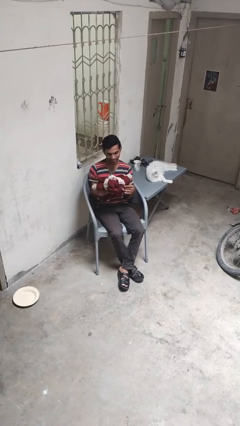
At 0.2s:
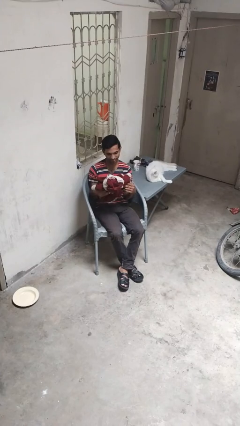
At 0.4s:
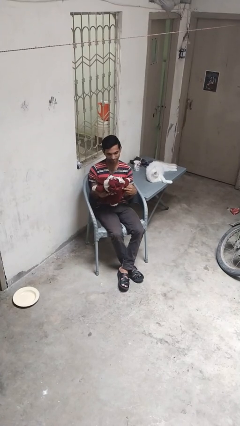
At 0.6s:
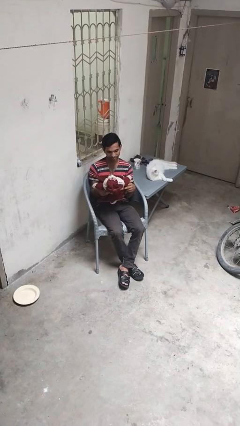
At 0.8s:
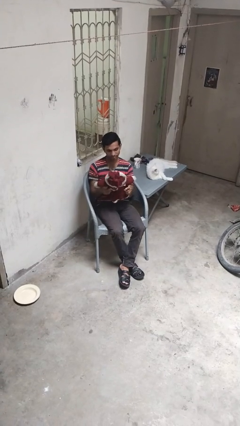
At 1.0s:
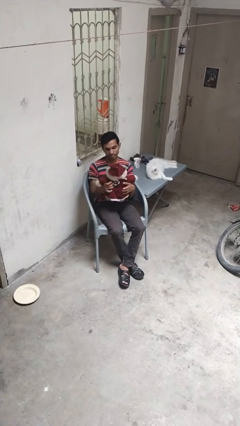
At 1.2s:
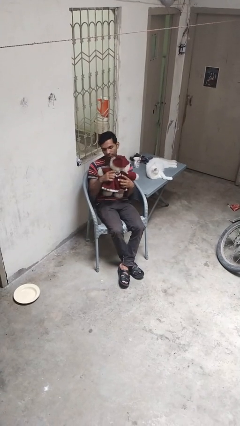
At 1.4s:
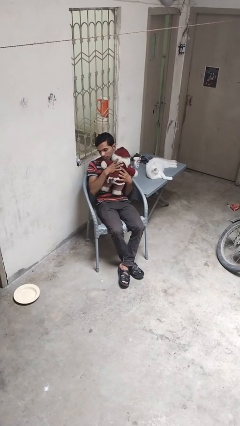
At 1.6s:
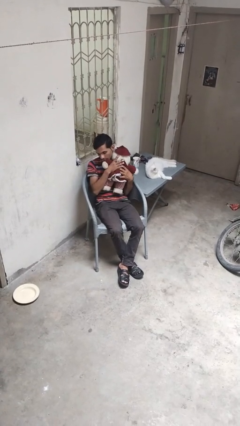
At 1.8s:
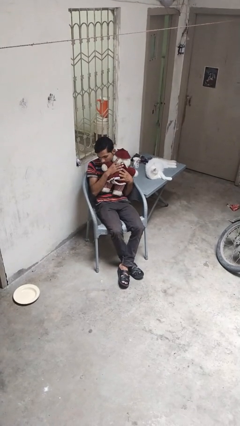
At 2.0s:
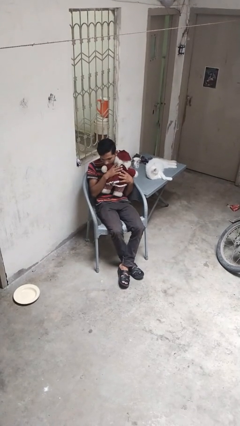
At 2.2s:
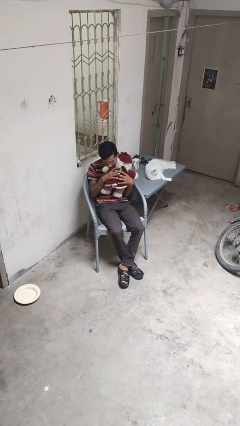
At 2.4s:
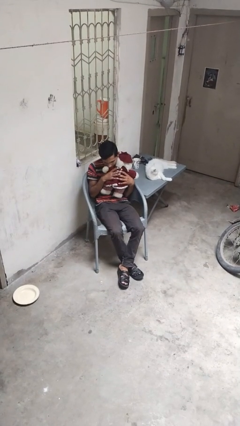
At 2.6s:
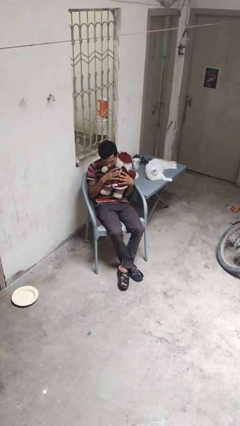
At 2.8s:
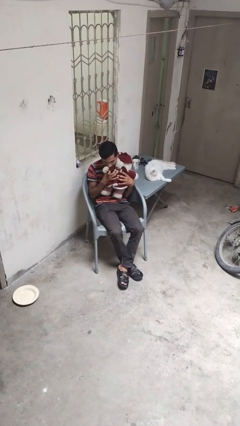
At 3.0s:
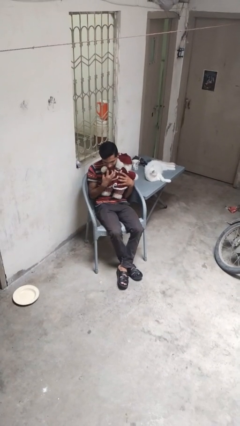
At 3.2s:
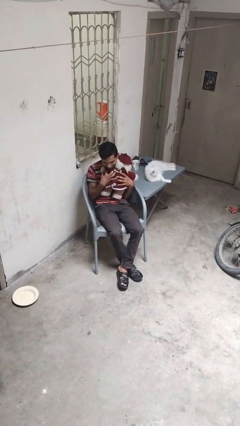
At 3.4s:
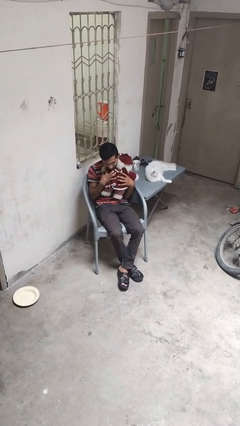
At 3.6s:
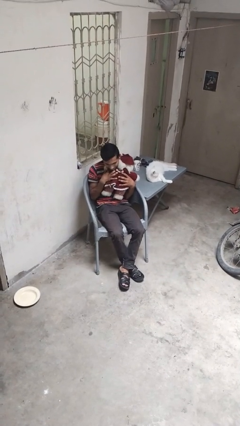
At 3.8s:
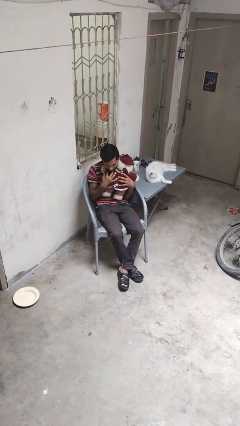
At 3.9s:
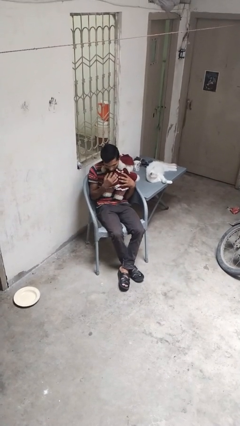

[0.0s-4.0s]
person hugs stuffed animal

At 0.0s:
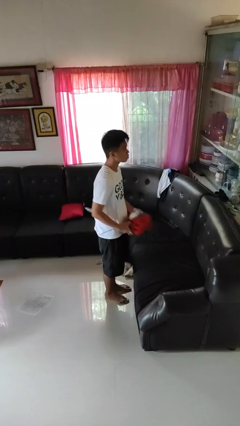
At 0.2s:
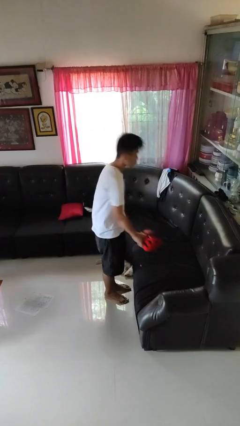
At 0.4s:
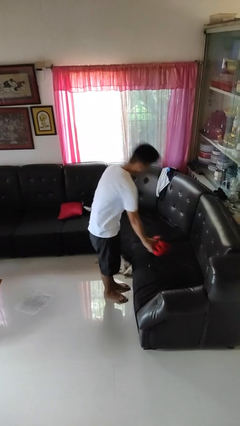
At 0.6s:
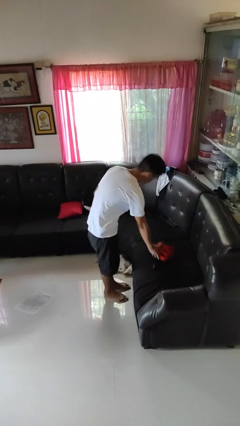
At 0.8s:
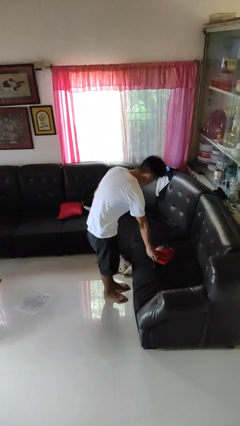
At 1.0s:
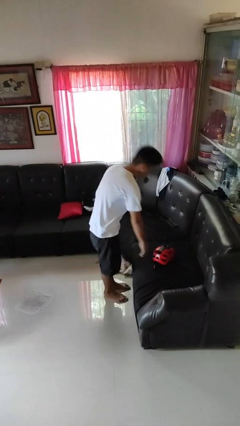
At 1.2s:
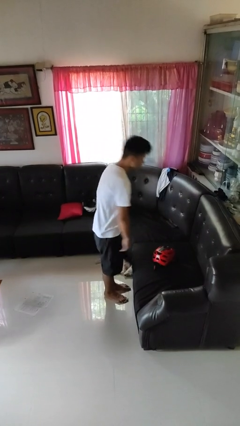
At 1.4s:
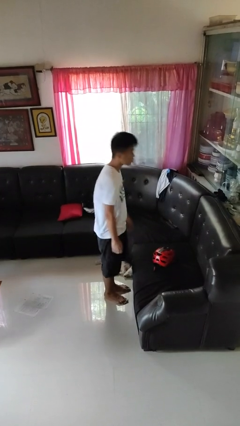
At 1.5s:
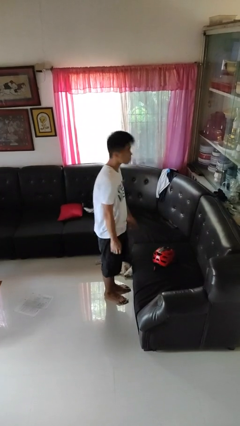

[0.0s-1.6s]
person puts down object on couch

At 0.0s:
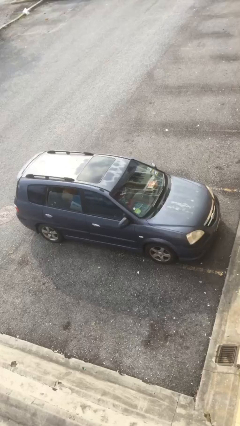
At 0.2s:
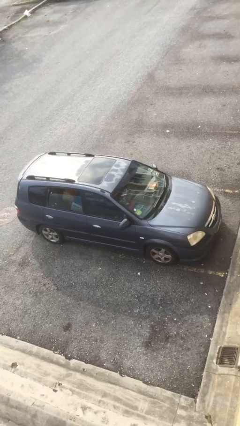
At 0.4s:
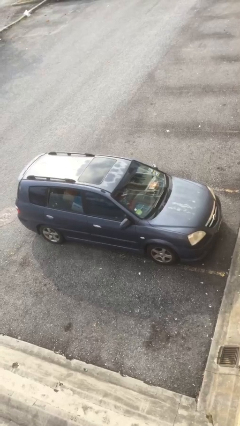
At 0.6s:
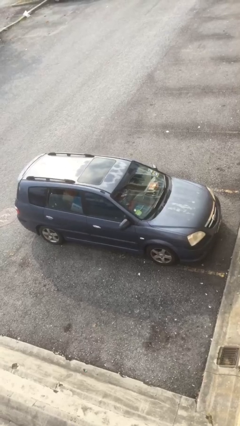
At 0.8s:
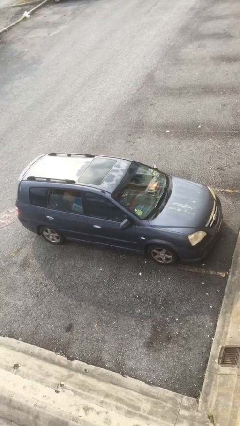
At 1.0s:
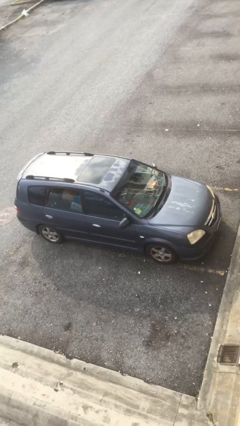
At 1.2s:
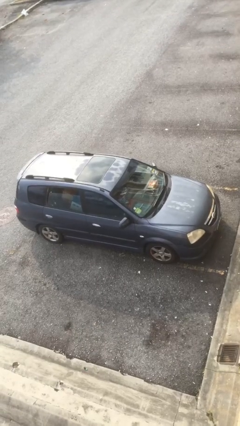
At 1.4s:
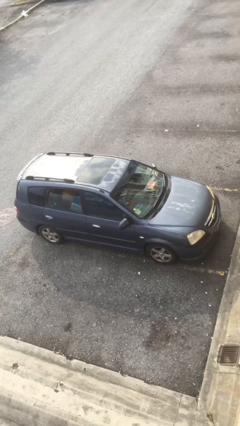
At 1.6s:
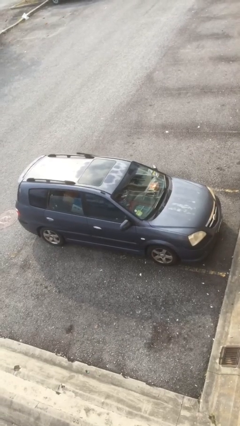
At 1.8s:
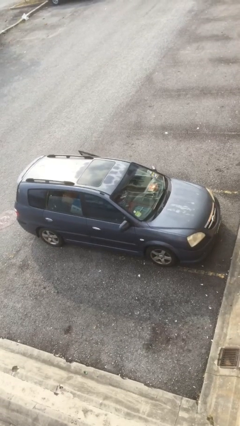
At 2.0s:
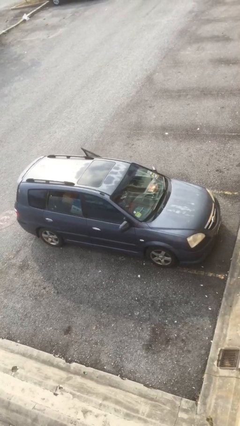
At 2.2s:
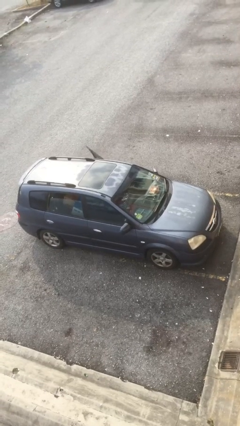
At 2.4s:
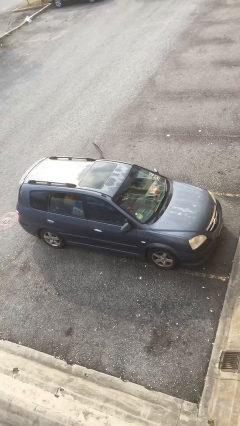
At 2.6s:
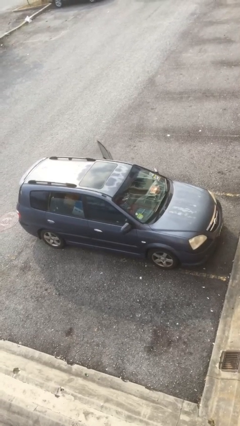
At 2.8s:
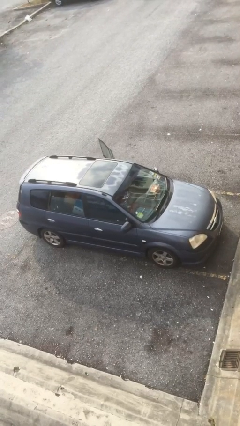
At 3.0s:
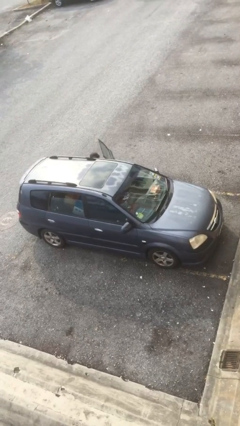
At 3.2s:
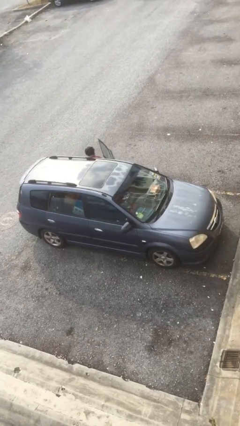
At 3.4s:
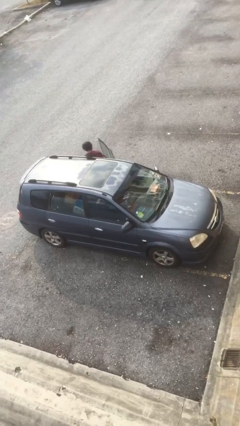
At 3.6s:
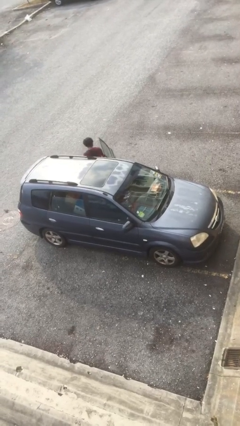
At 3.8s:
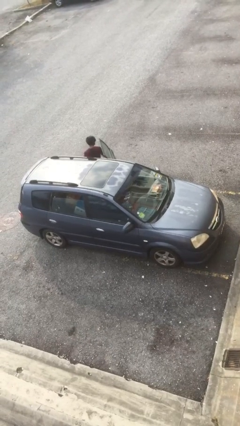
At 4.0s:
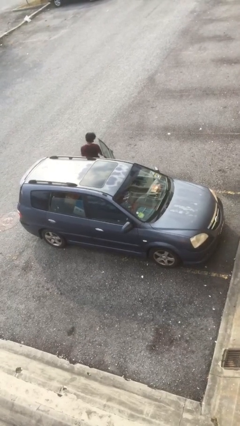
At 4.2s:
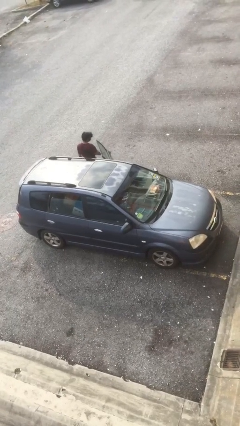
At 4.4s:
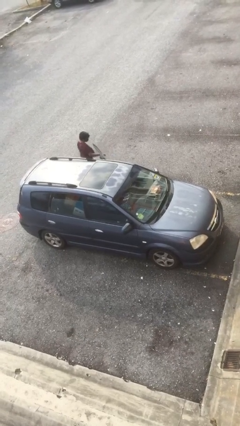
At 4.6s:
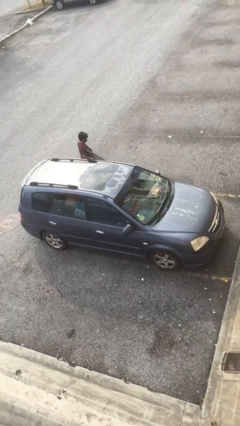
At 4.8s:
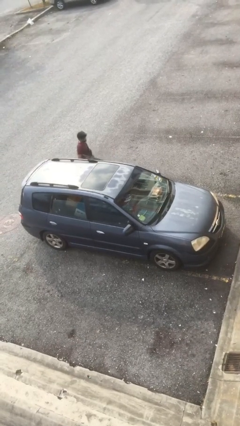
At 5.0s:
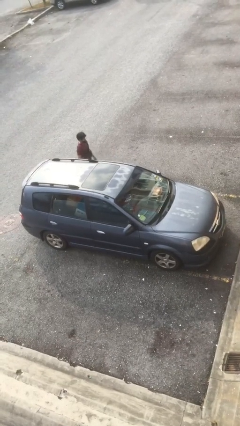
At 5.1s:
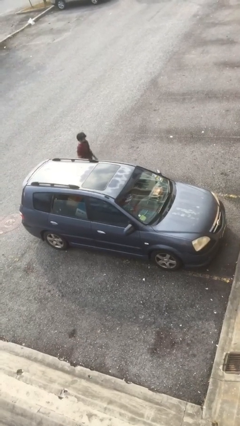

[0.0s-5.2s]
car drops off person

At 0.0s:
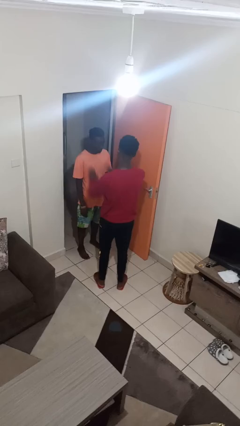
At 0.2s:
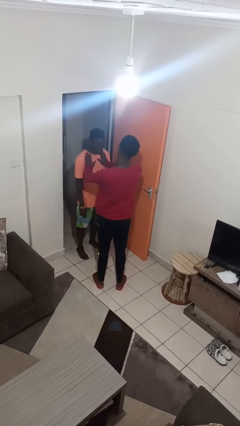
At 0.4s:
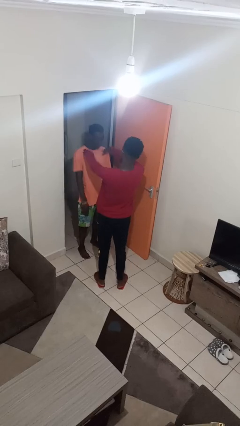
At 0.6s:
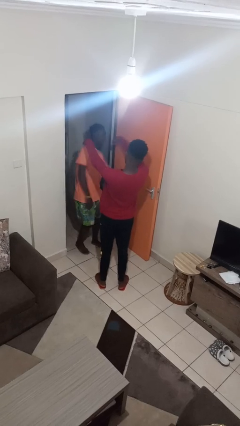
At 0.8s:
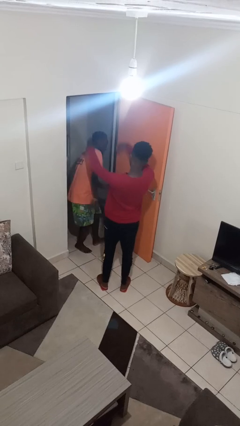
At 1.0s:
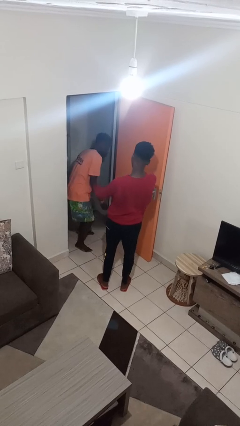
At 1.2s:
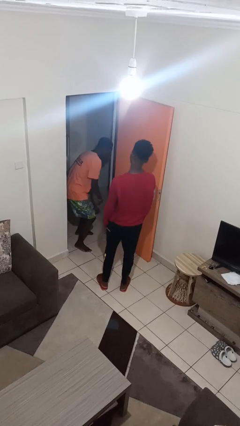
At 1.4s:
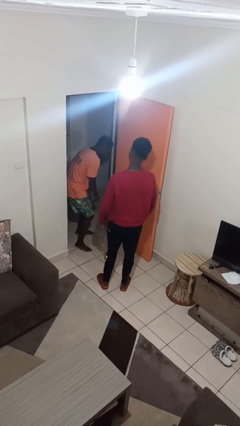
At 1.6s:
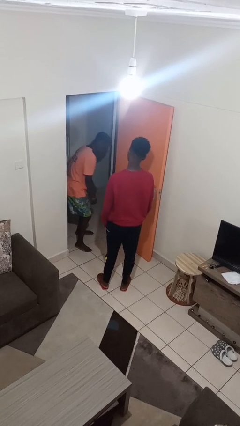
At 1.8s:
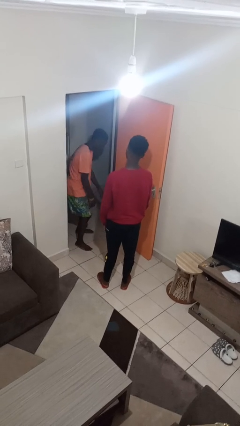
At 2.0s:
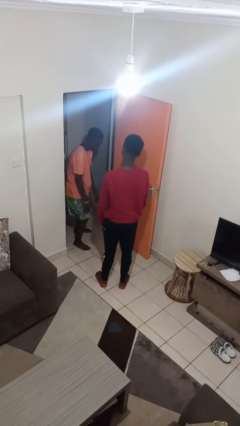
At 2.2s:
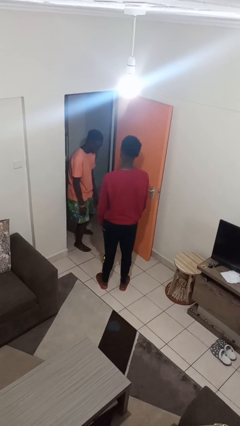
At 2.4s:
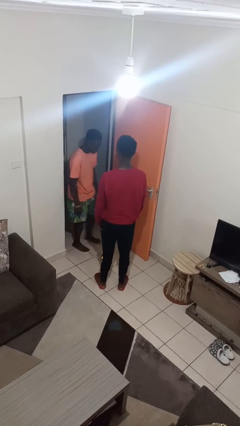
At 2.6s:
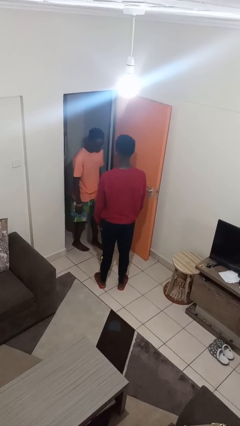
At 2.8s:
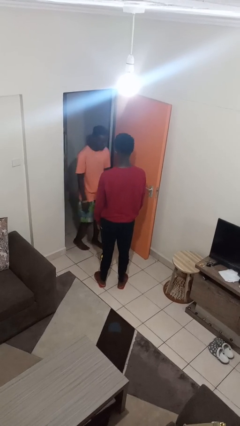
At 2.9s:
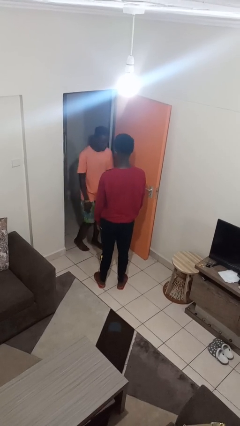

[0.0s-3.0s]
person shoves person

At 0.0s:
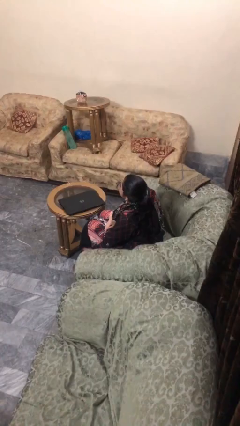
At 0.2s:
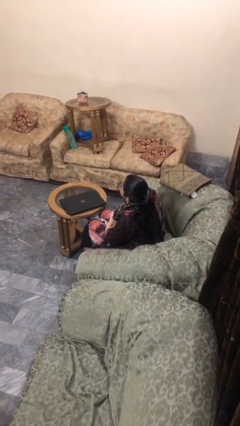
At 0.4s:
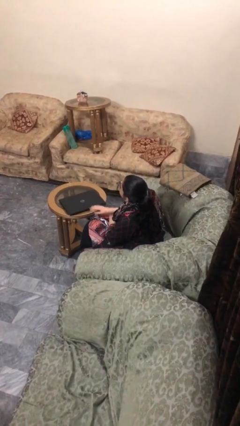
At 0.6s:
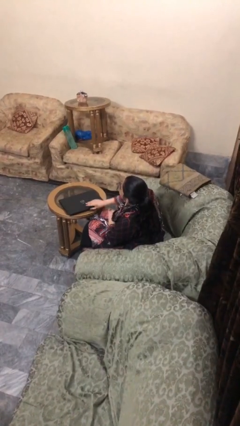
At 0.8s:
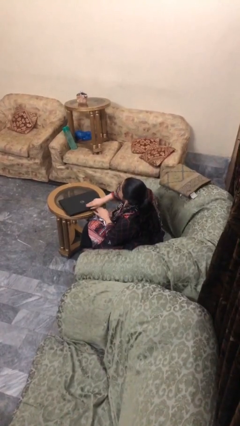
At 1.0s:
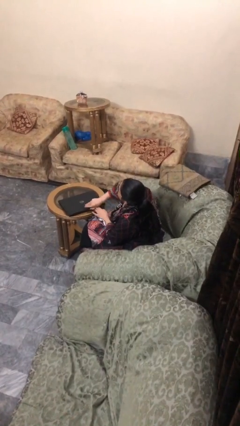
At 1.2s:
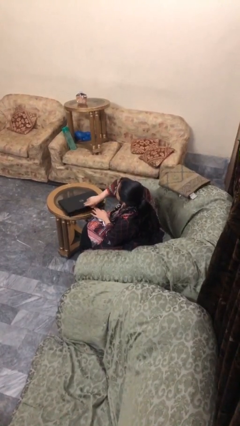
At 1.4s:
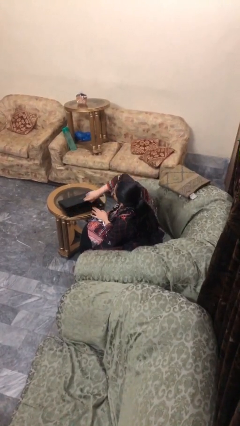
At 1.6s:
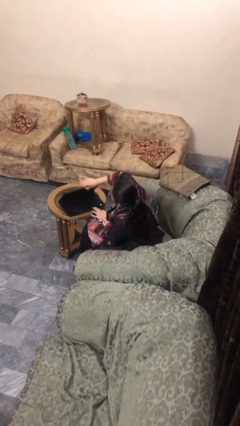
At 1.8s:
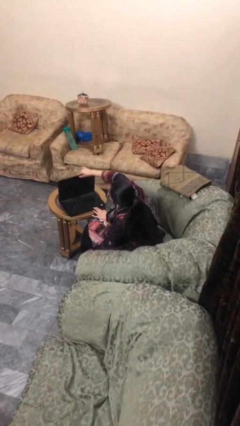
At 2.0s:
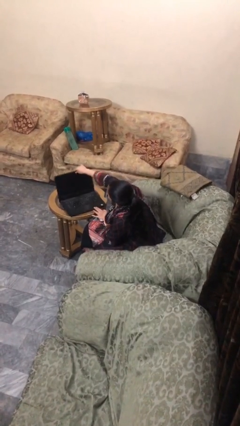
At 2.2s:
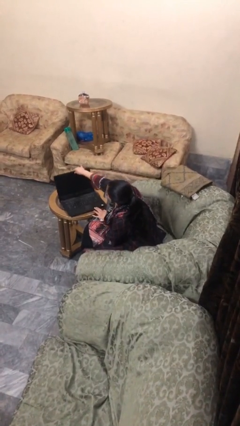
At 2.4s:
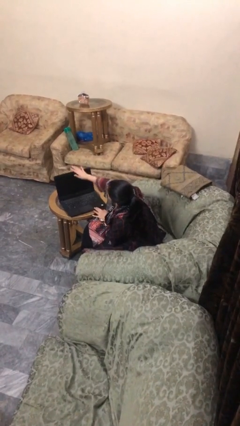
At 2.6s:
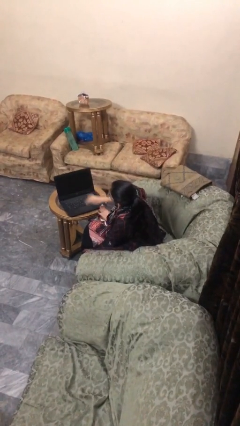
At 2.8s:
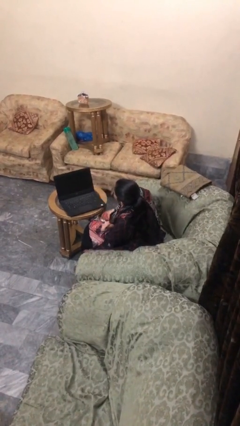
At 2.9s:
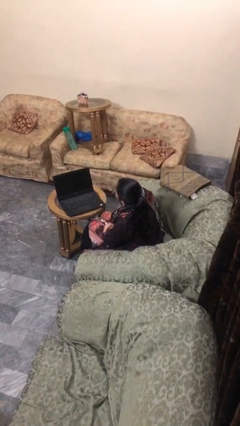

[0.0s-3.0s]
person opens laptop

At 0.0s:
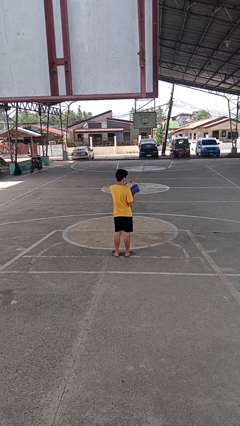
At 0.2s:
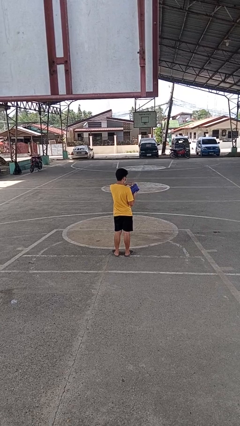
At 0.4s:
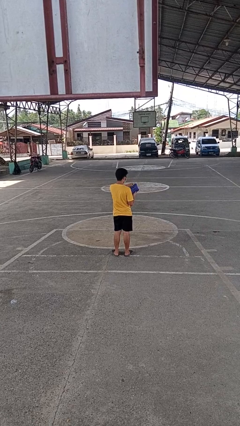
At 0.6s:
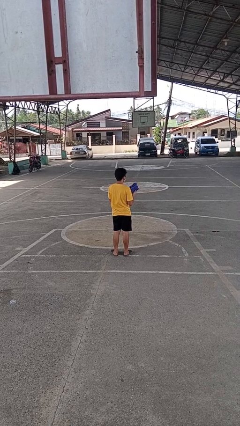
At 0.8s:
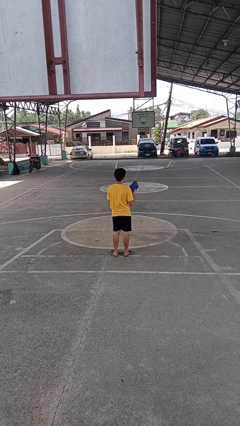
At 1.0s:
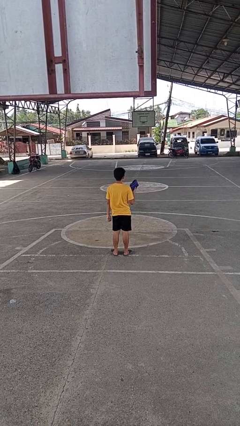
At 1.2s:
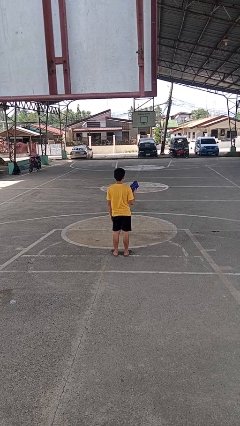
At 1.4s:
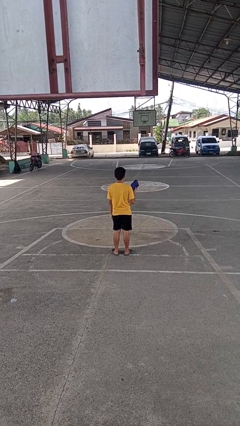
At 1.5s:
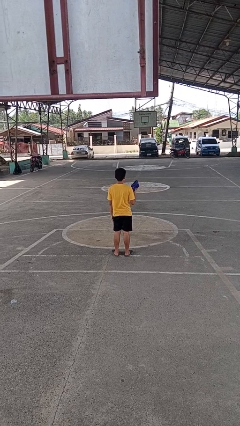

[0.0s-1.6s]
person puts object into purse
